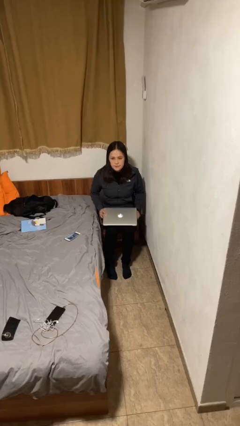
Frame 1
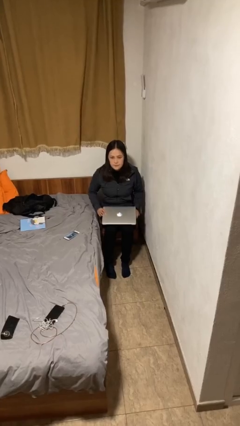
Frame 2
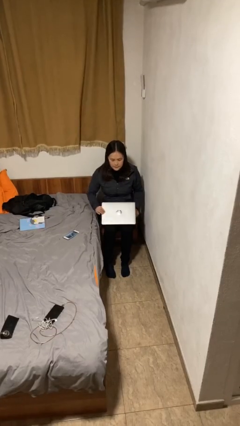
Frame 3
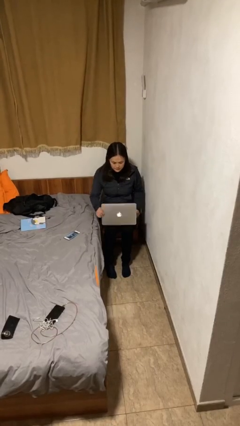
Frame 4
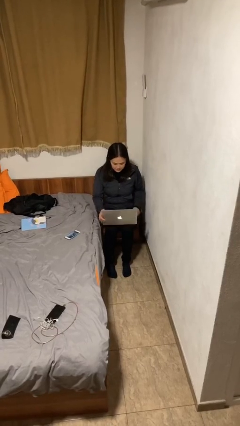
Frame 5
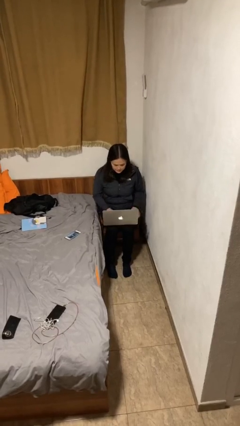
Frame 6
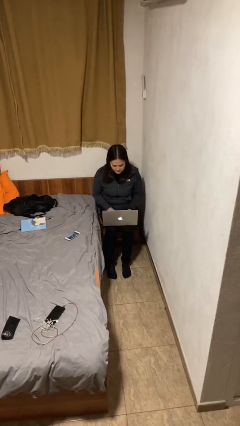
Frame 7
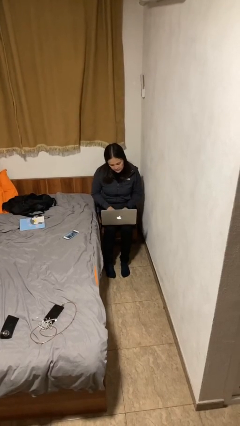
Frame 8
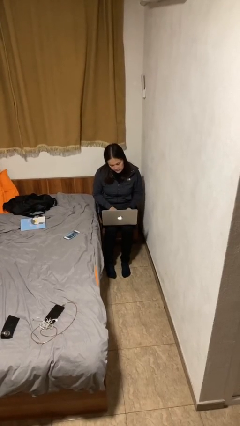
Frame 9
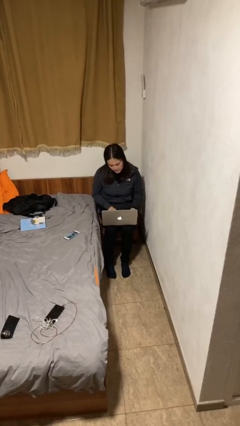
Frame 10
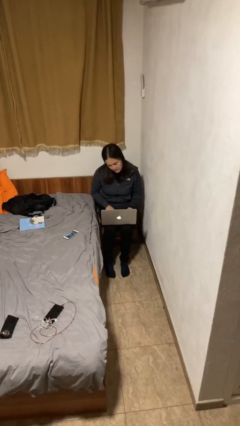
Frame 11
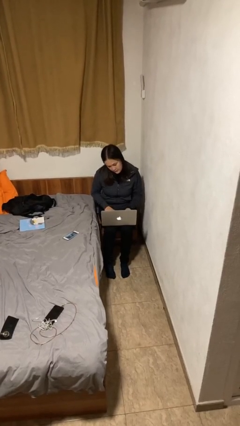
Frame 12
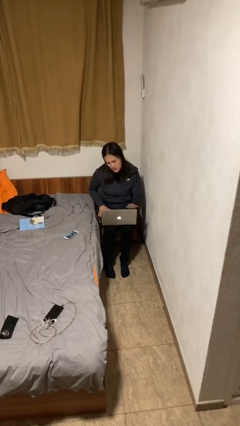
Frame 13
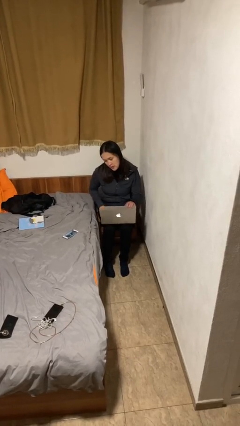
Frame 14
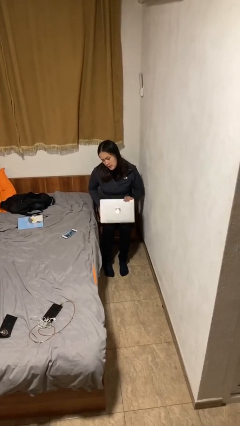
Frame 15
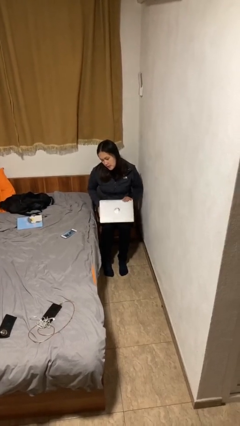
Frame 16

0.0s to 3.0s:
person interacts with laptop

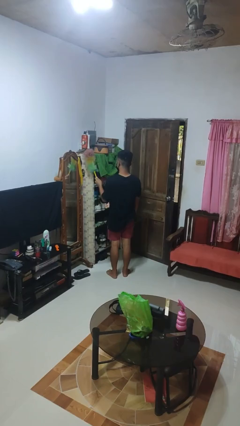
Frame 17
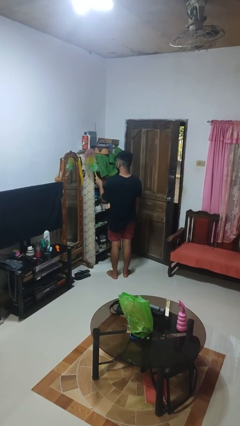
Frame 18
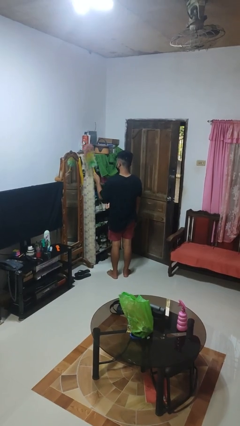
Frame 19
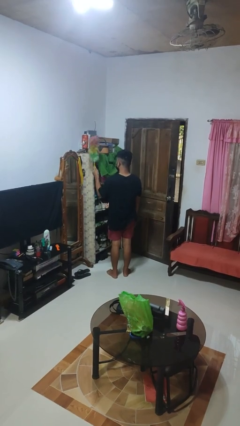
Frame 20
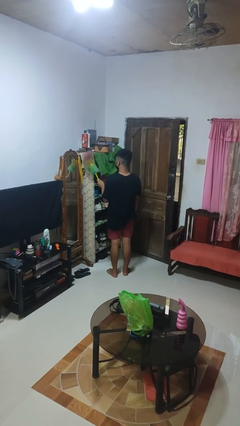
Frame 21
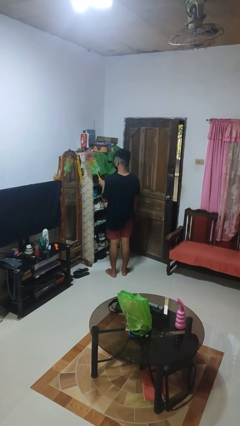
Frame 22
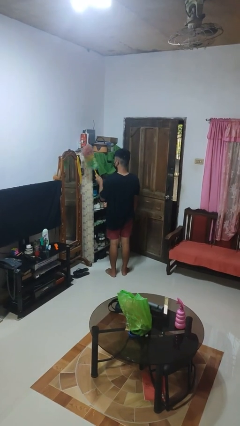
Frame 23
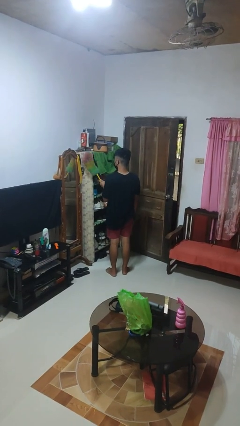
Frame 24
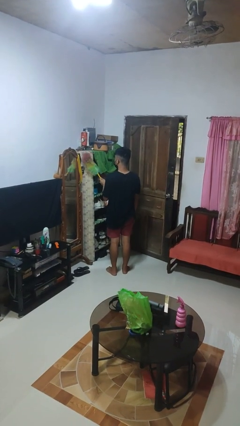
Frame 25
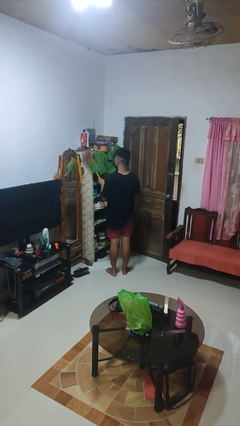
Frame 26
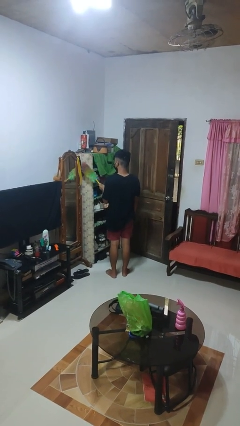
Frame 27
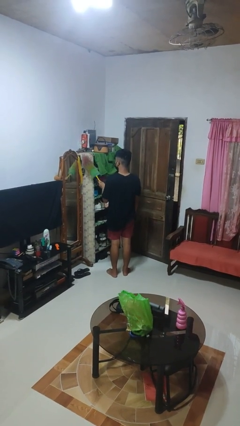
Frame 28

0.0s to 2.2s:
person dusts furniture

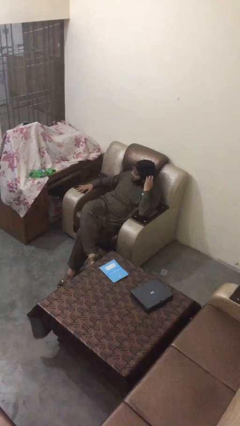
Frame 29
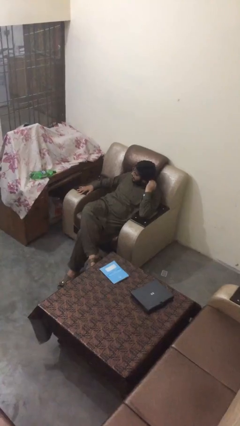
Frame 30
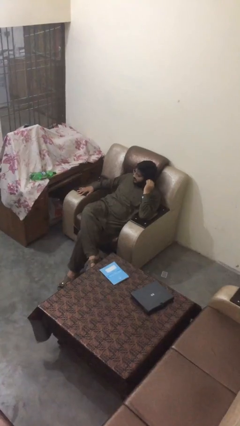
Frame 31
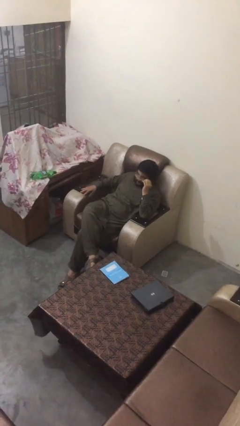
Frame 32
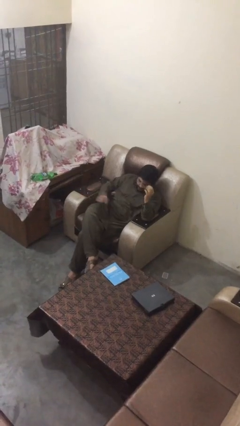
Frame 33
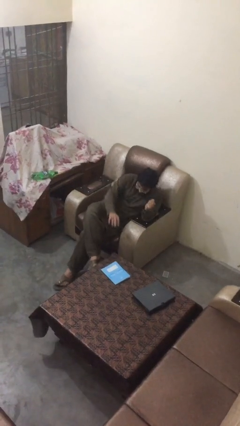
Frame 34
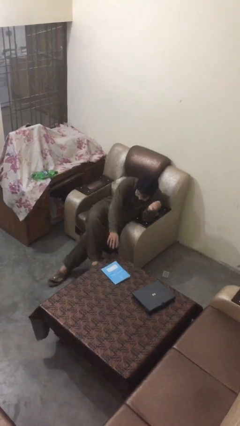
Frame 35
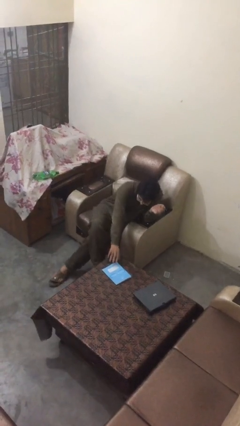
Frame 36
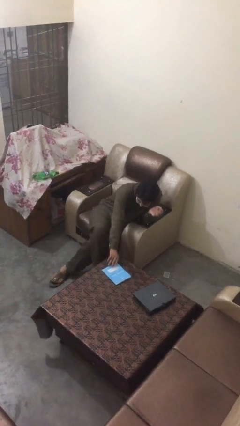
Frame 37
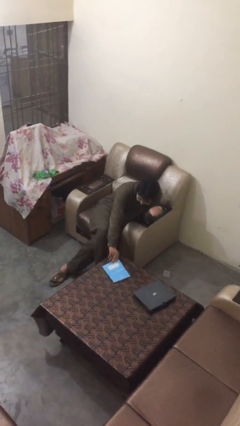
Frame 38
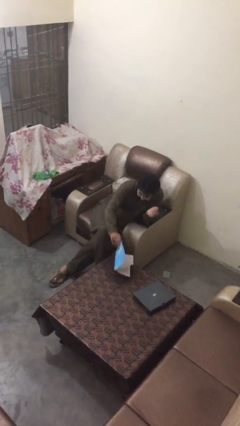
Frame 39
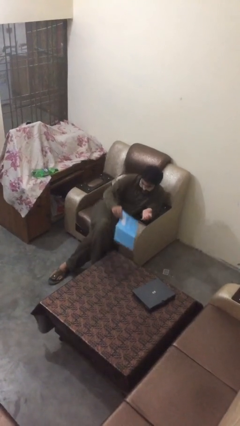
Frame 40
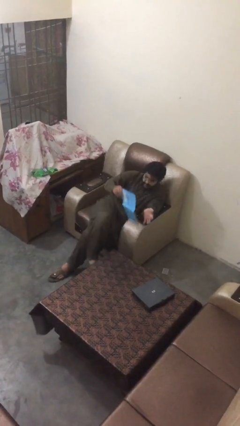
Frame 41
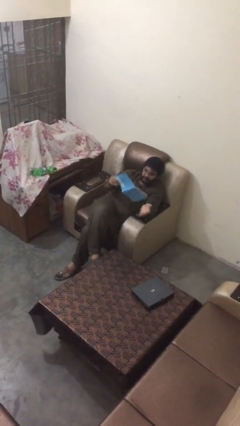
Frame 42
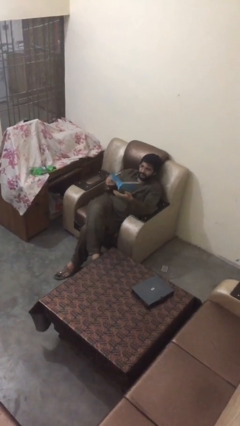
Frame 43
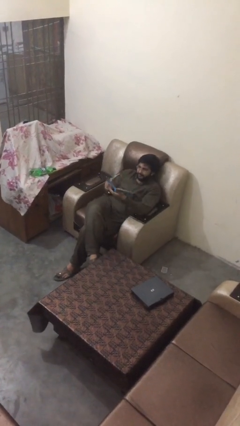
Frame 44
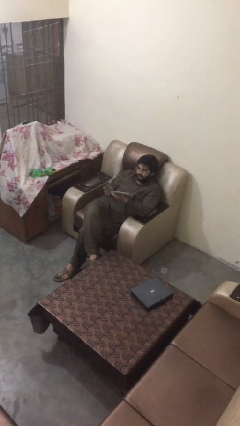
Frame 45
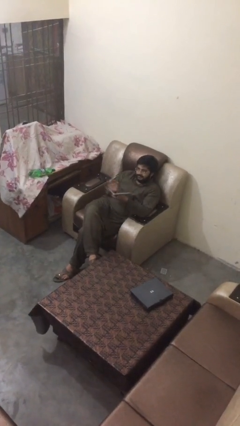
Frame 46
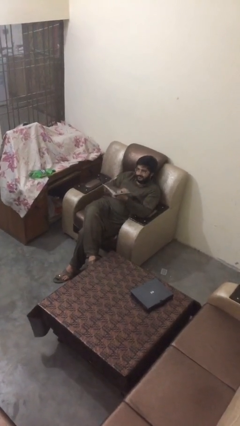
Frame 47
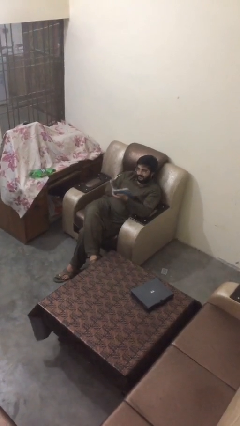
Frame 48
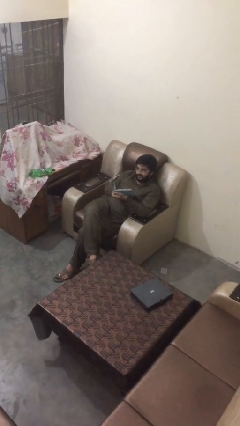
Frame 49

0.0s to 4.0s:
person picks up object from table

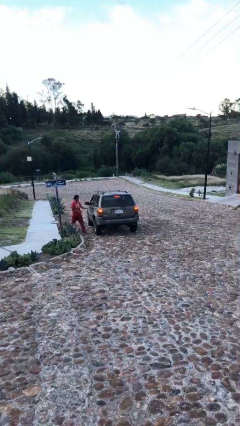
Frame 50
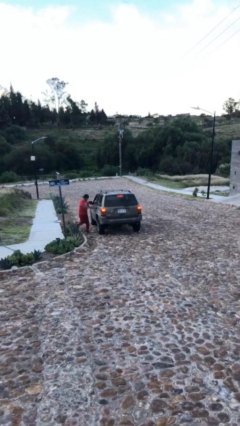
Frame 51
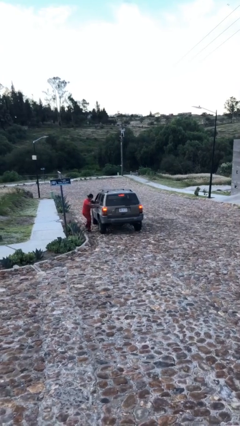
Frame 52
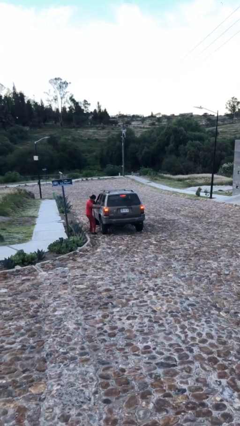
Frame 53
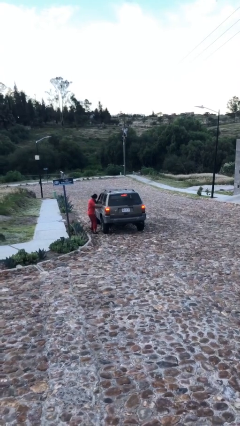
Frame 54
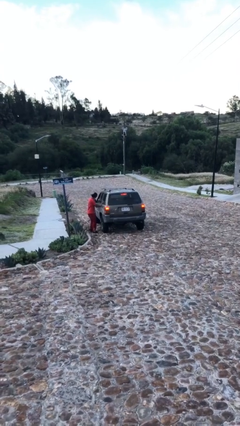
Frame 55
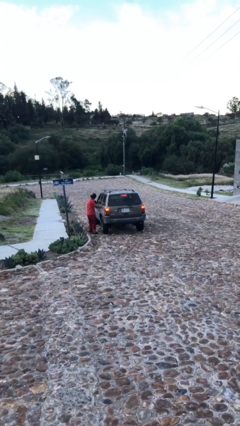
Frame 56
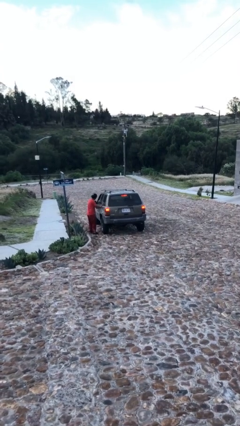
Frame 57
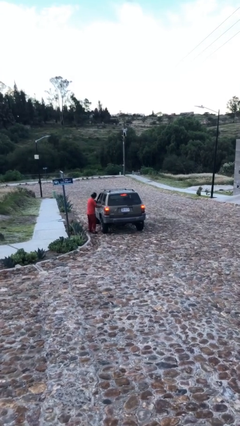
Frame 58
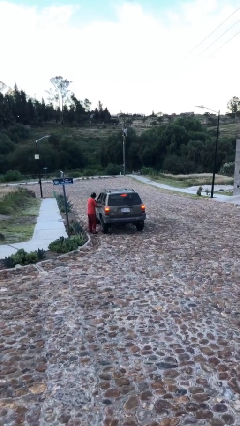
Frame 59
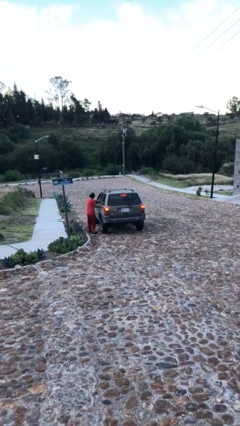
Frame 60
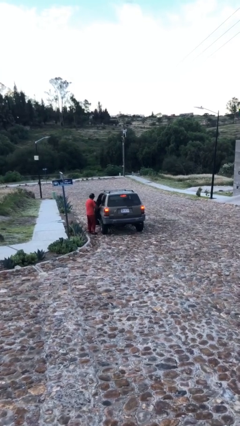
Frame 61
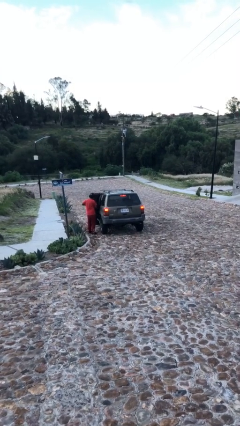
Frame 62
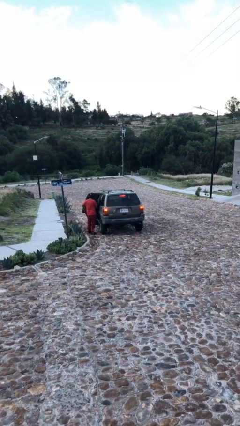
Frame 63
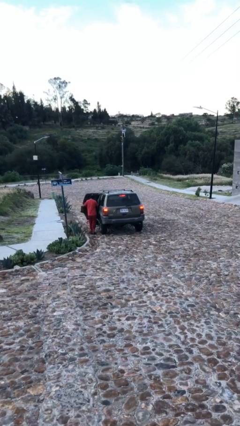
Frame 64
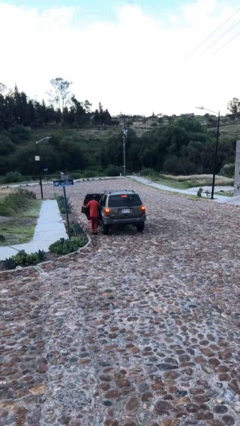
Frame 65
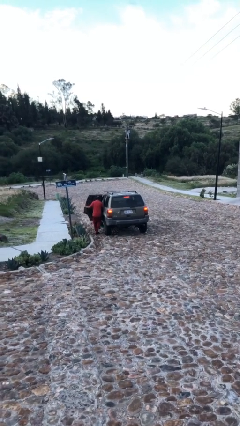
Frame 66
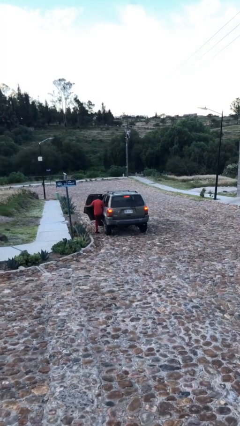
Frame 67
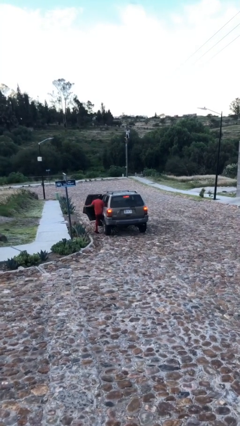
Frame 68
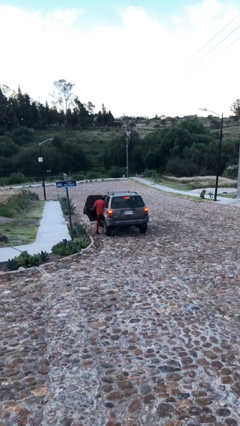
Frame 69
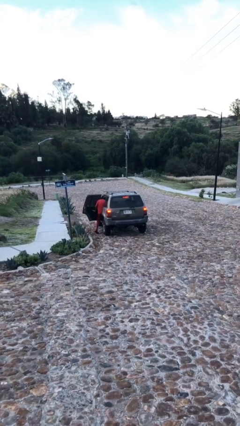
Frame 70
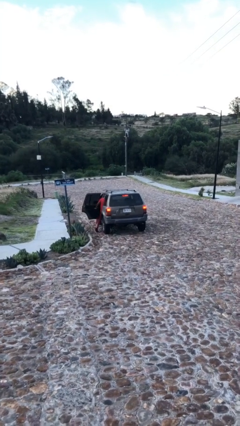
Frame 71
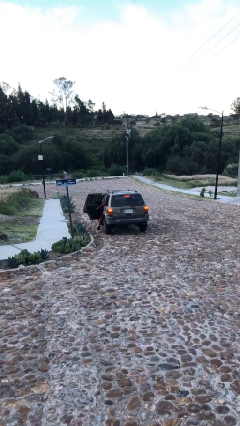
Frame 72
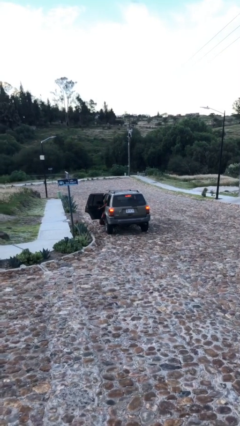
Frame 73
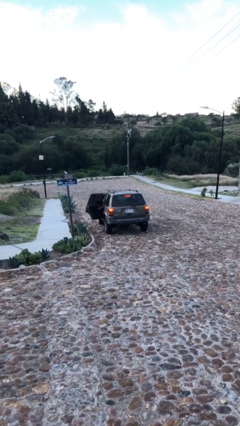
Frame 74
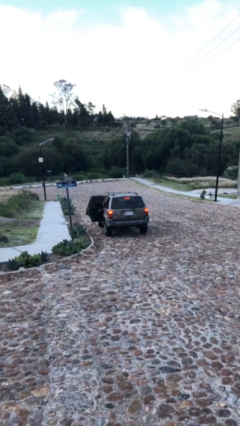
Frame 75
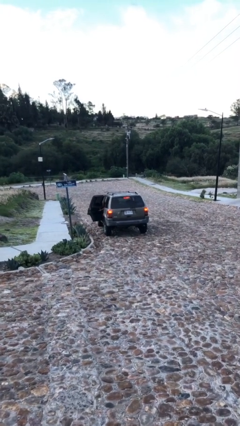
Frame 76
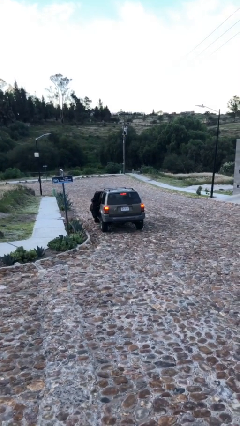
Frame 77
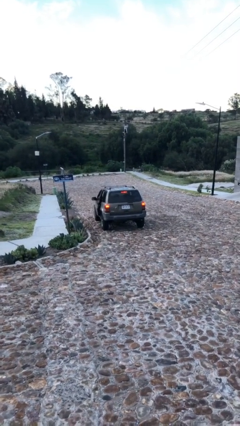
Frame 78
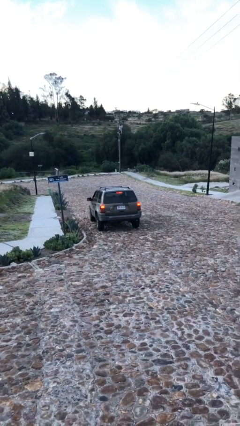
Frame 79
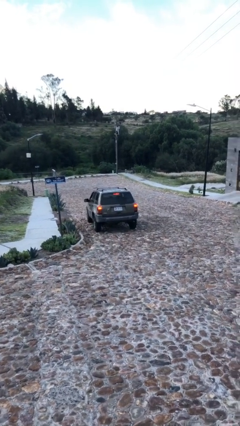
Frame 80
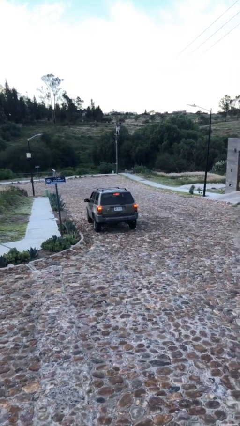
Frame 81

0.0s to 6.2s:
car picks up person

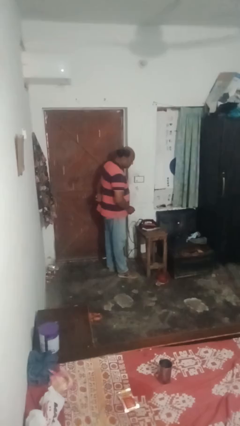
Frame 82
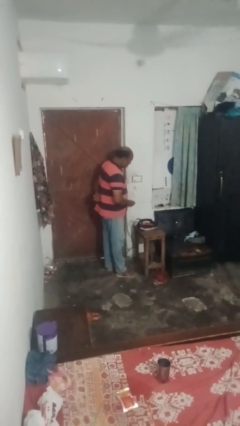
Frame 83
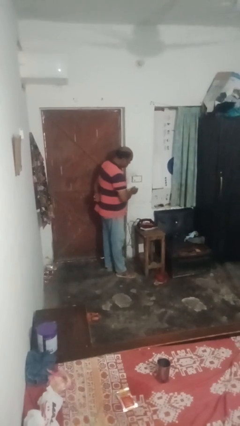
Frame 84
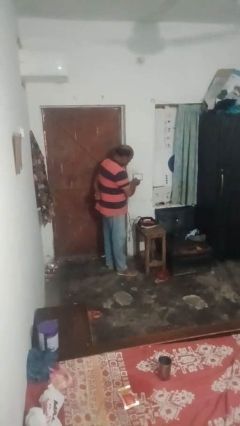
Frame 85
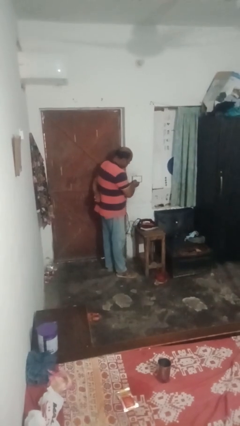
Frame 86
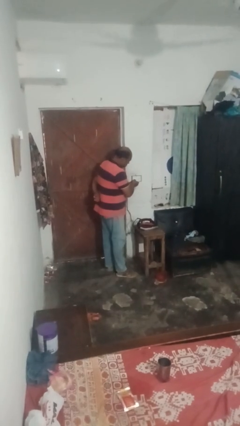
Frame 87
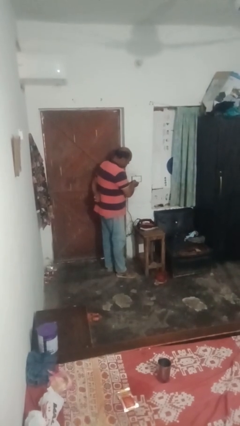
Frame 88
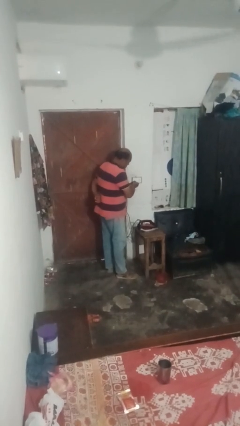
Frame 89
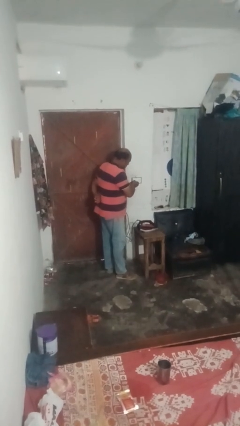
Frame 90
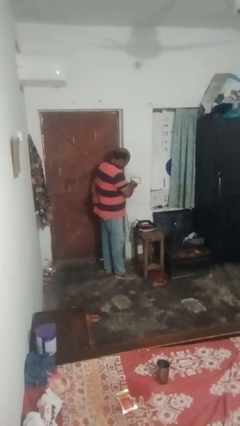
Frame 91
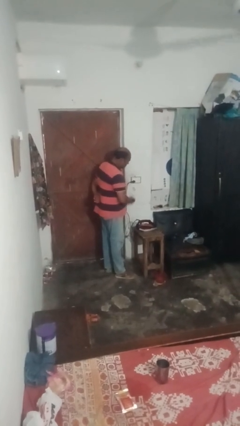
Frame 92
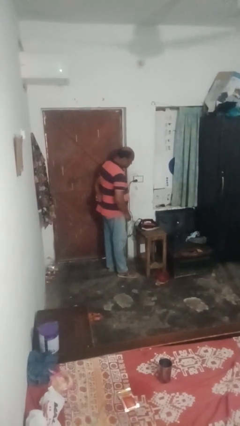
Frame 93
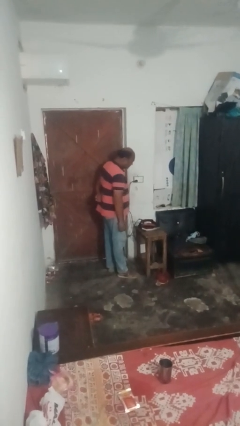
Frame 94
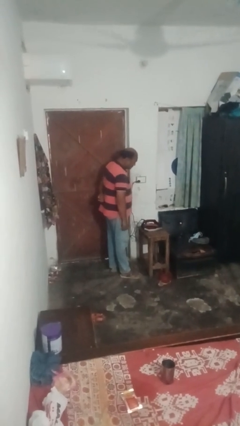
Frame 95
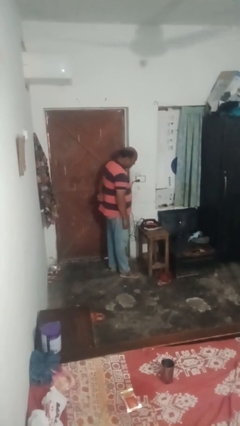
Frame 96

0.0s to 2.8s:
person plugs into electrical socket
